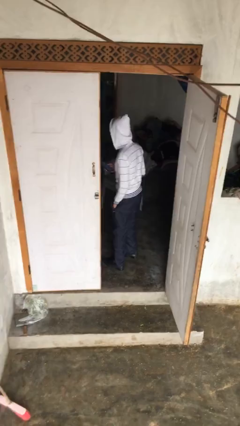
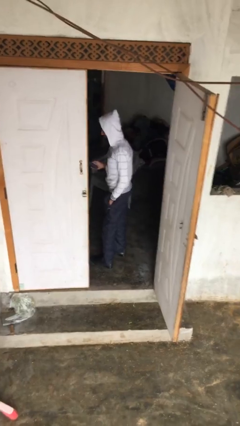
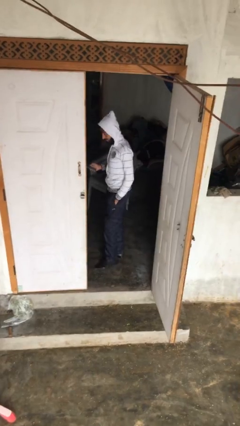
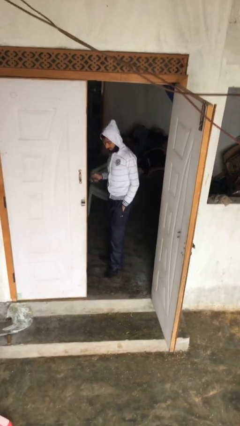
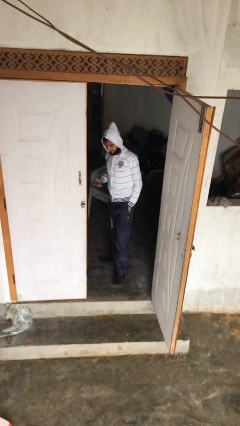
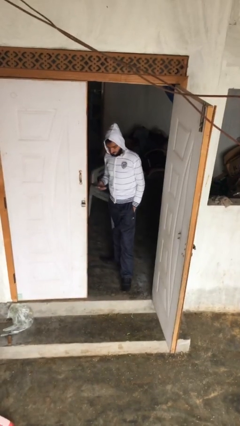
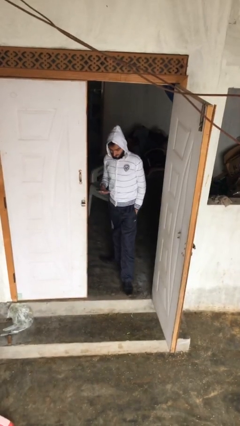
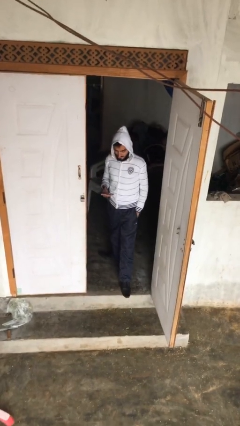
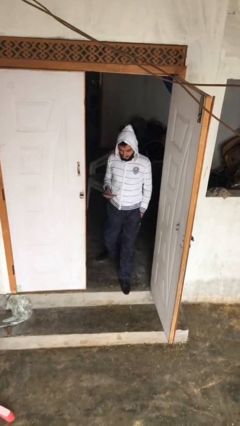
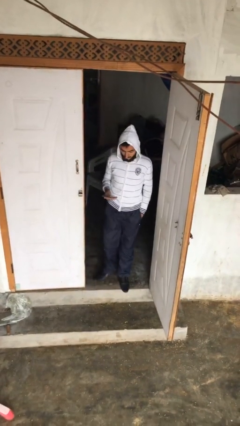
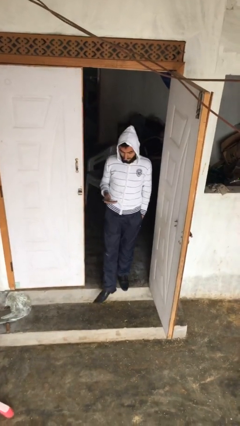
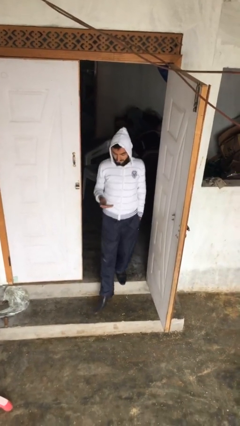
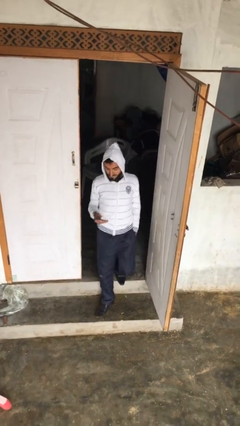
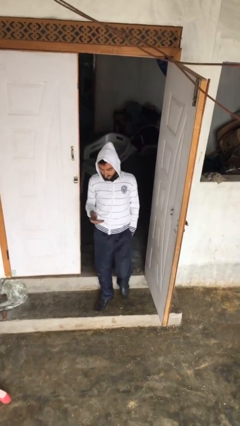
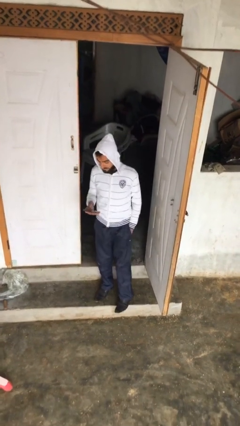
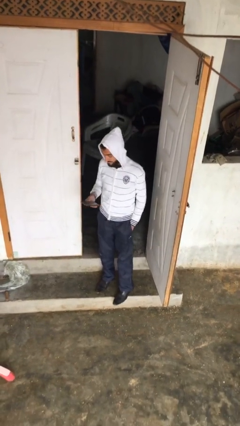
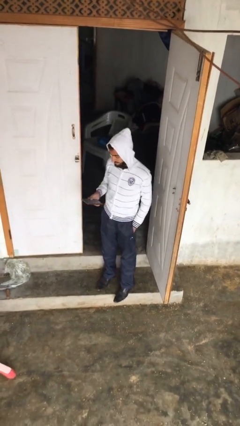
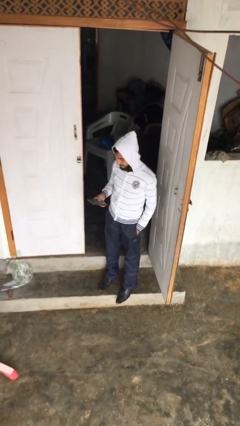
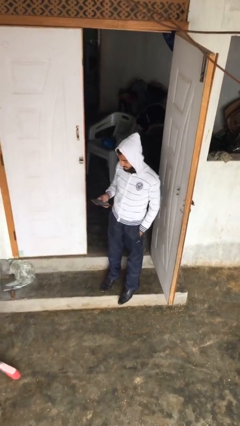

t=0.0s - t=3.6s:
person enters scene through structure

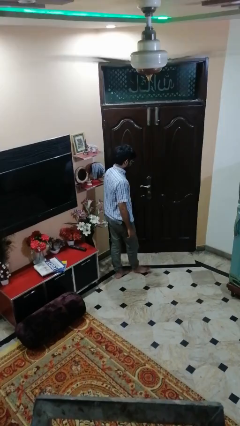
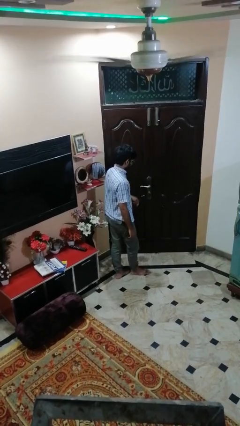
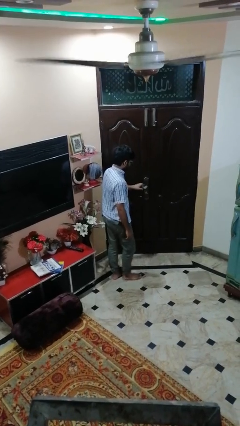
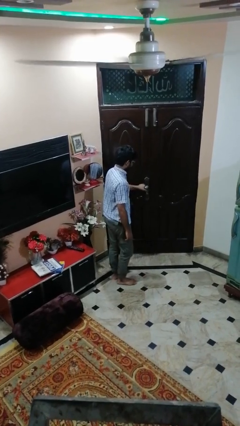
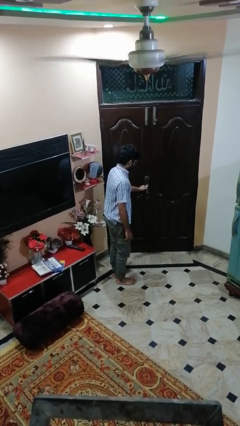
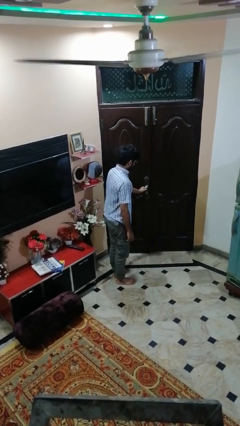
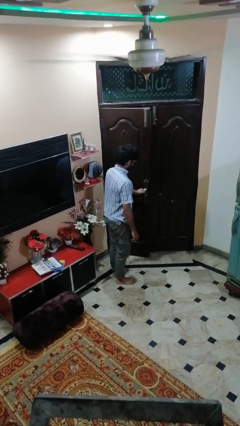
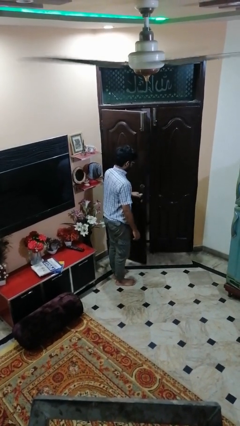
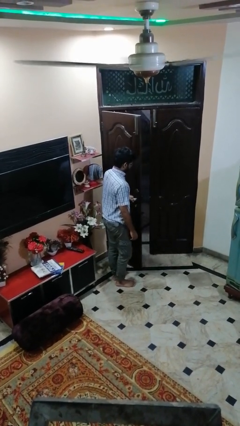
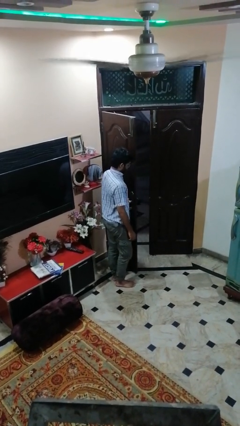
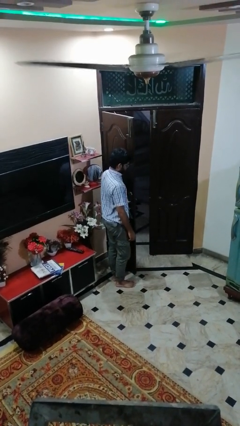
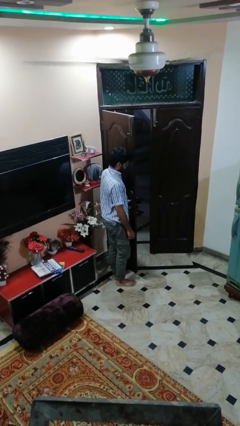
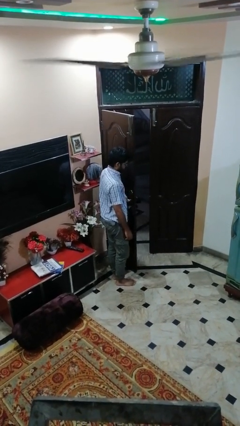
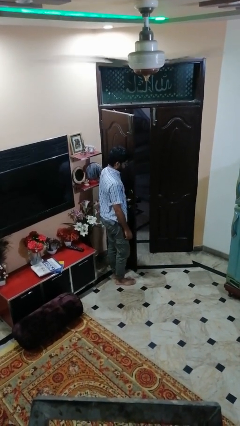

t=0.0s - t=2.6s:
person opens facility door

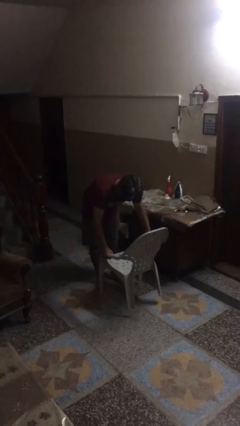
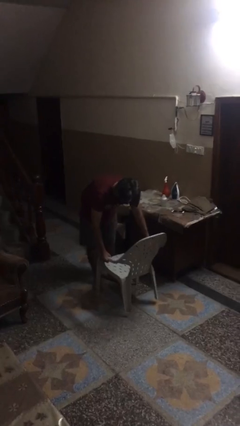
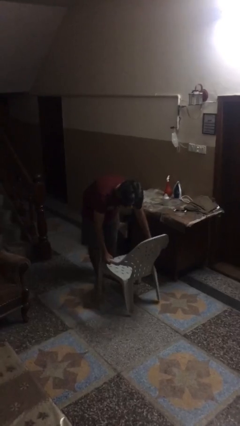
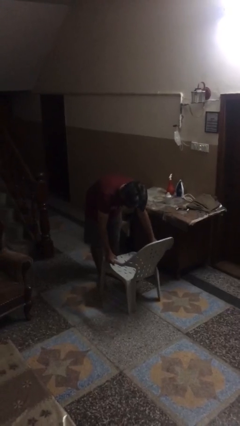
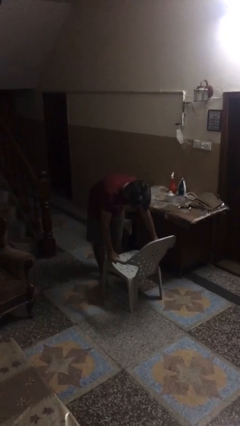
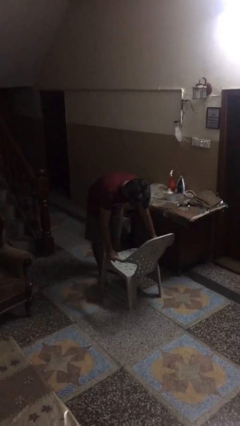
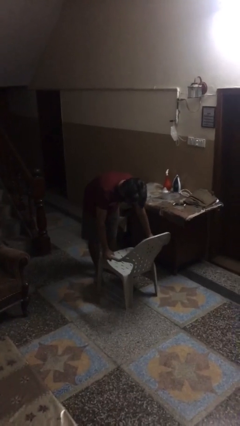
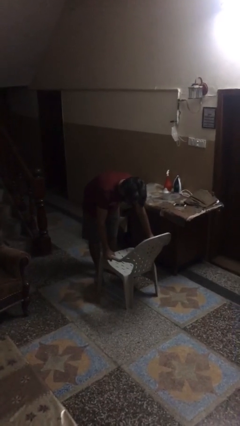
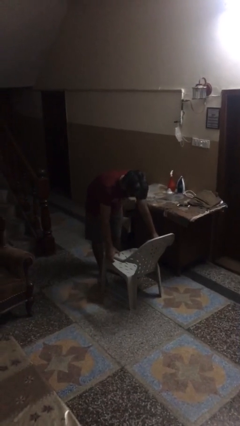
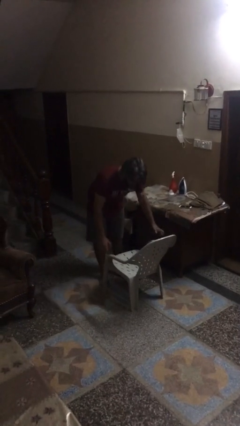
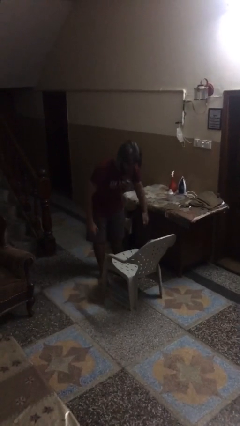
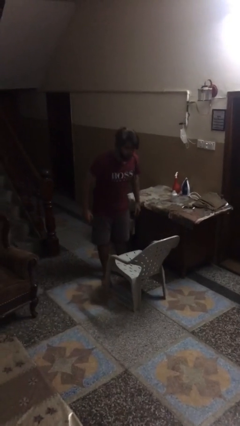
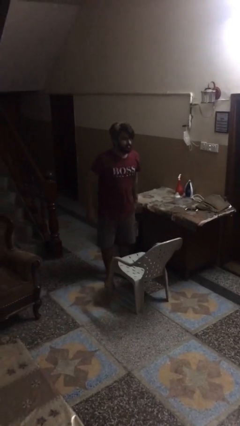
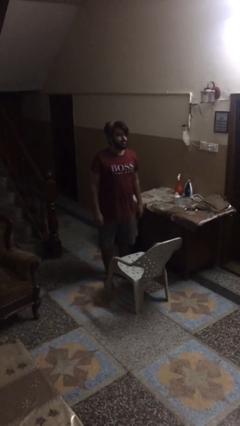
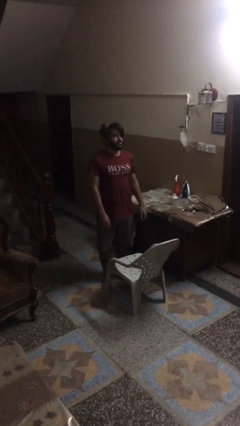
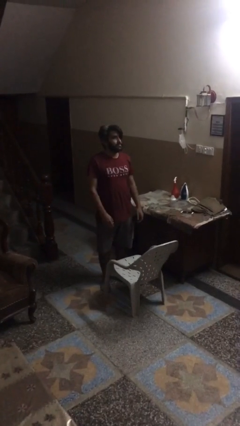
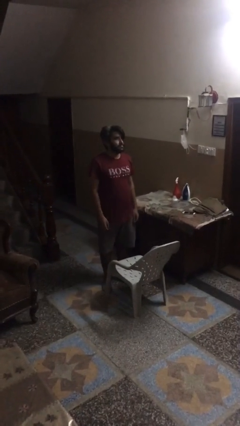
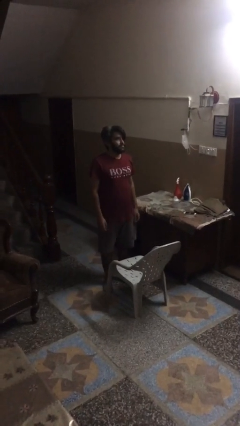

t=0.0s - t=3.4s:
person puts down object on floor

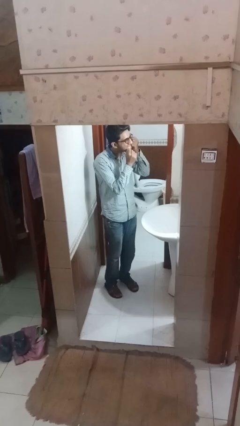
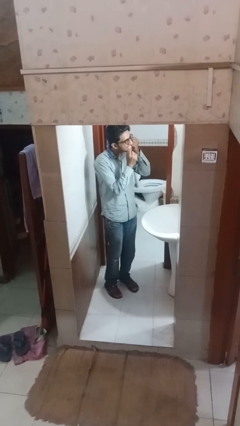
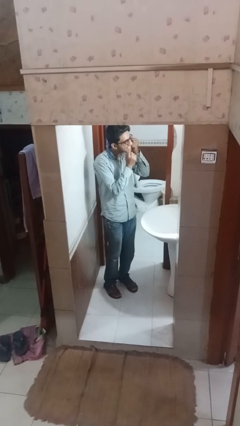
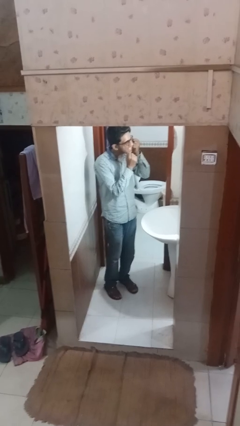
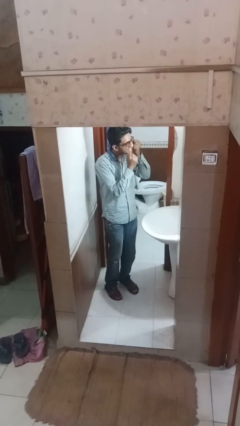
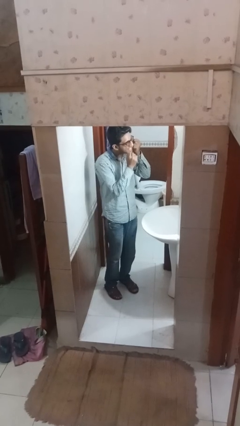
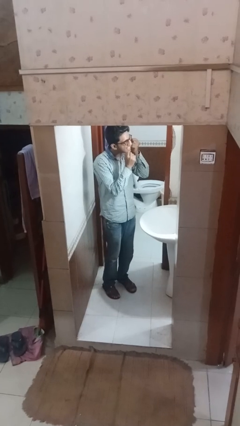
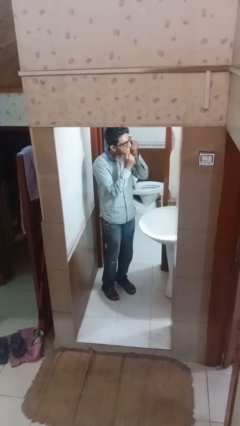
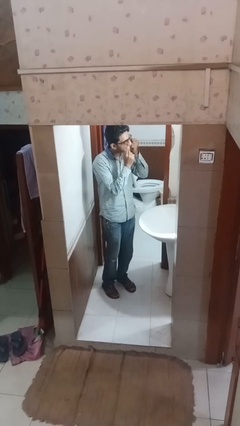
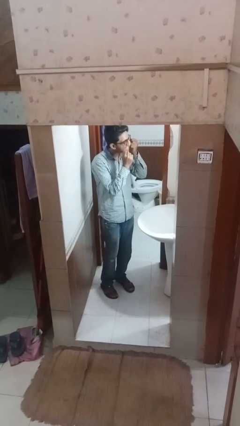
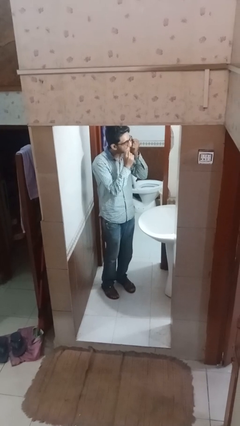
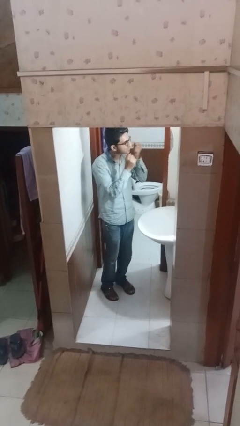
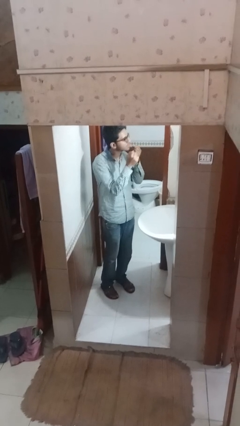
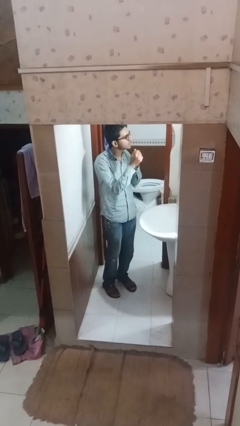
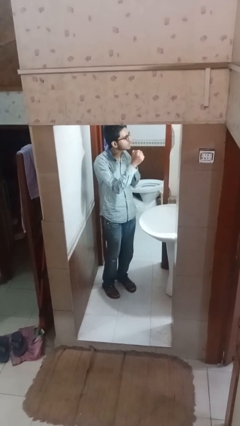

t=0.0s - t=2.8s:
person flosses

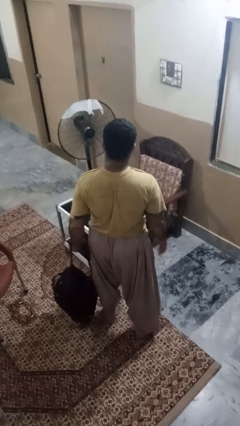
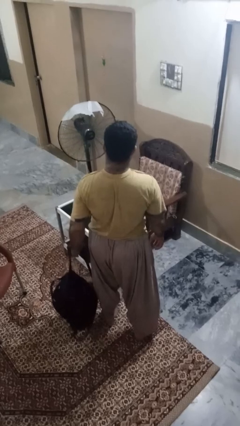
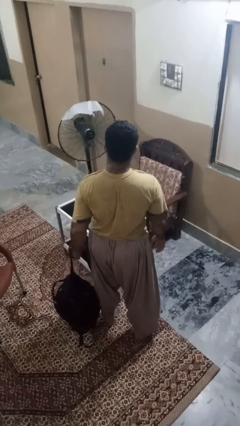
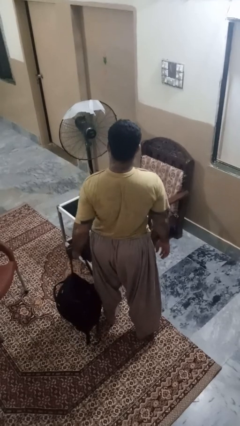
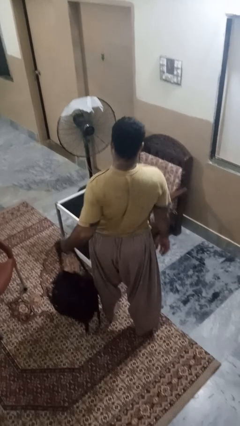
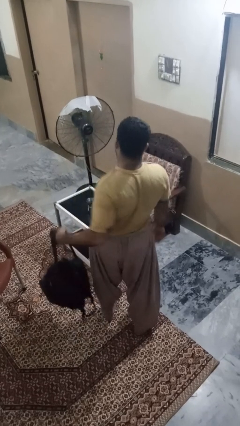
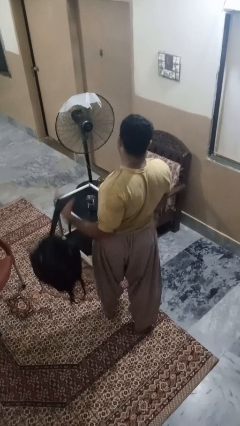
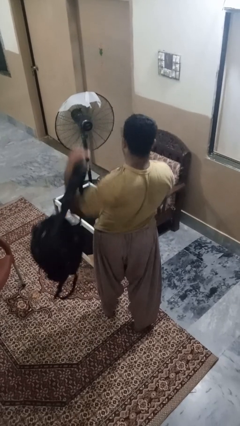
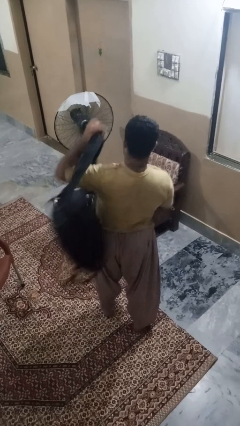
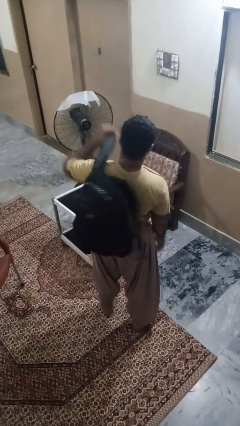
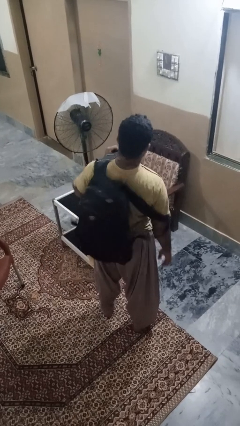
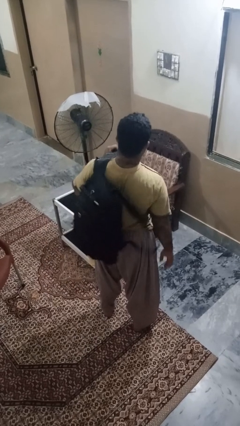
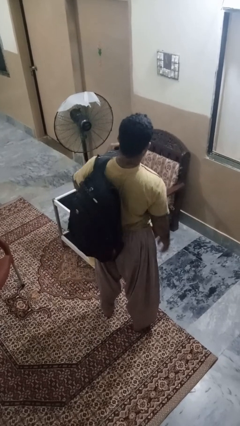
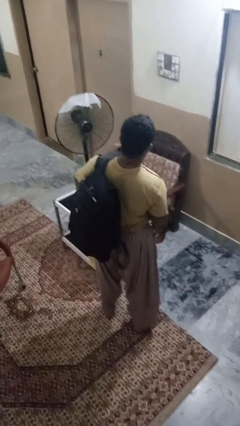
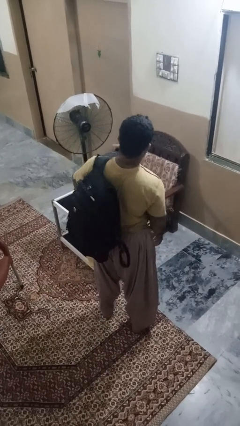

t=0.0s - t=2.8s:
person puts on backpack

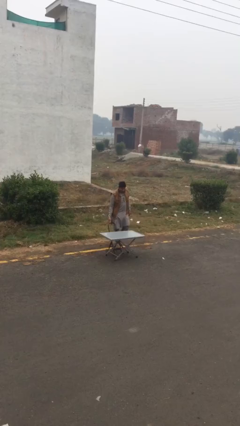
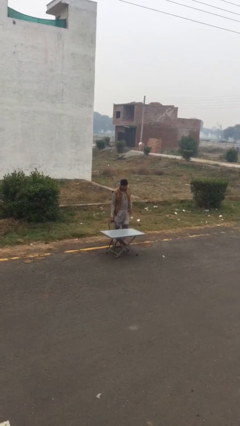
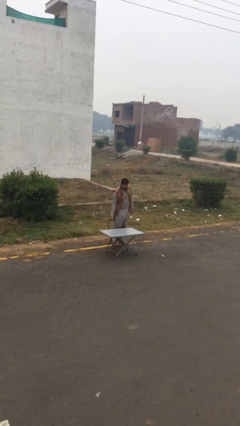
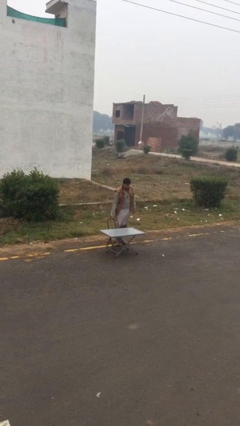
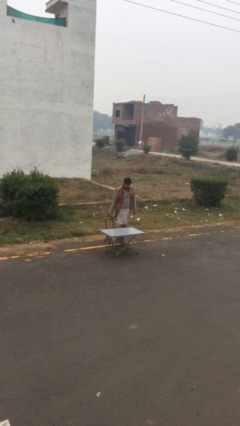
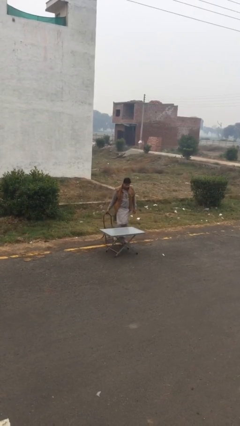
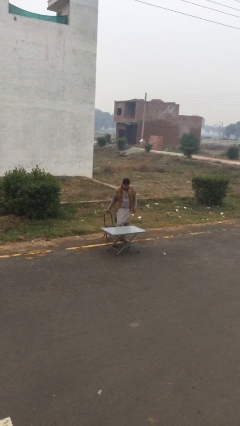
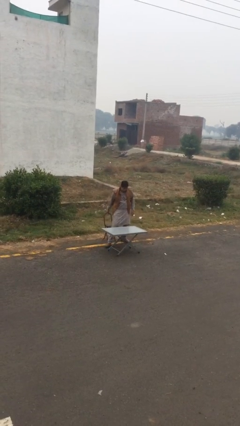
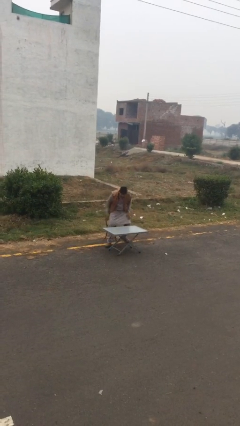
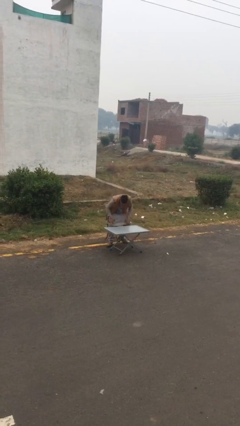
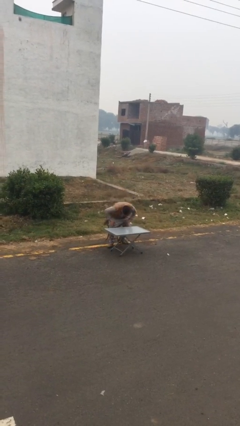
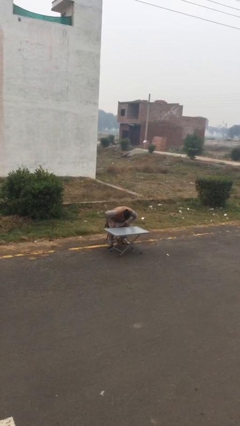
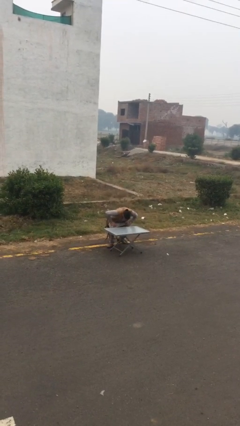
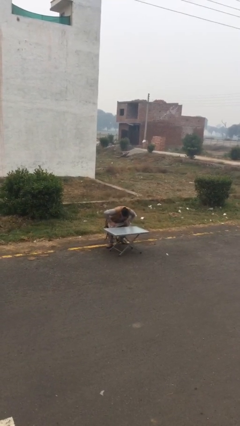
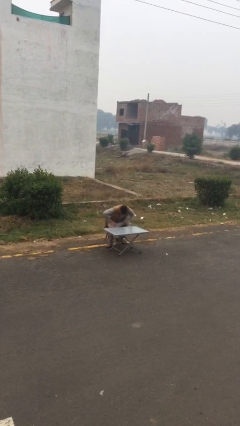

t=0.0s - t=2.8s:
person sits down
